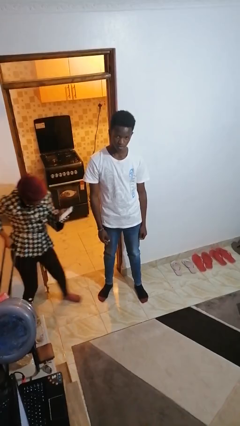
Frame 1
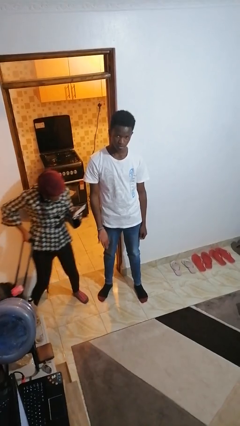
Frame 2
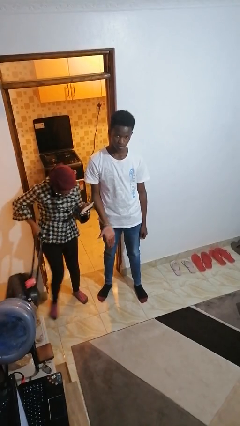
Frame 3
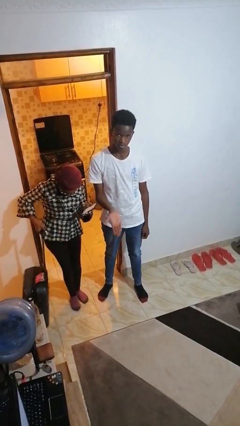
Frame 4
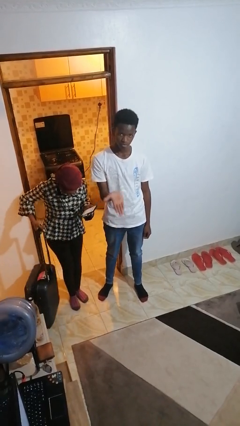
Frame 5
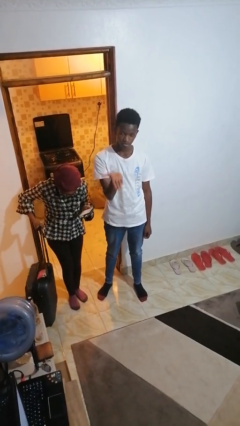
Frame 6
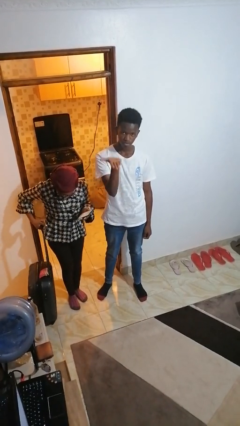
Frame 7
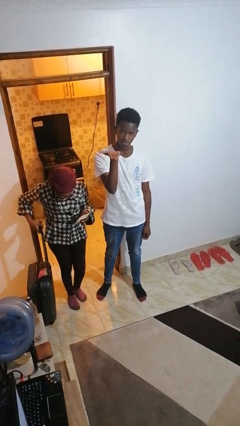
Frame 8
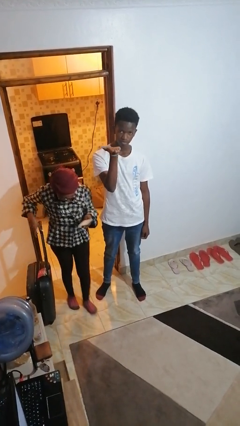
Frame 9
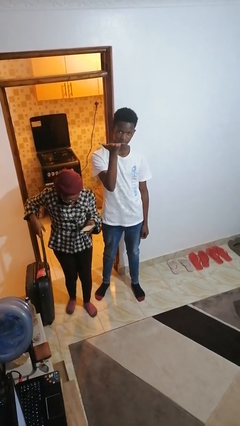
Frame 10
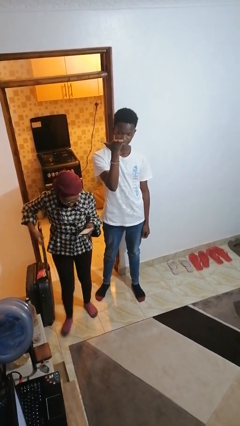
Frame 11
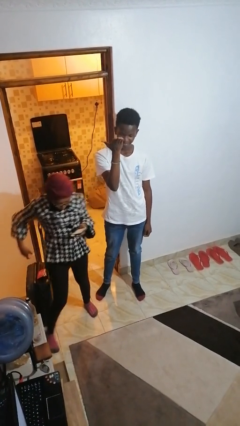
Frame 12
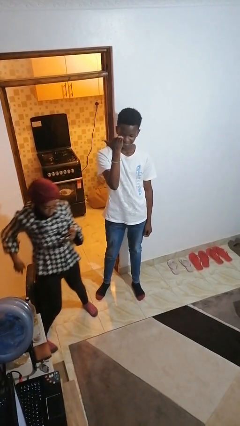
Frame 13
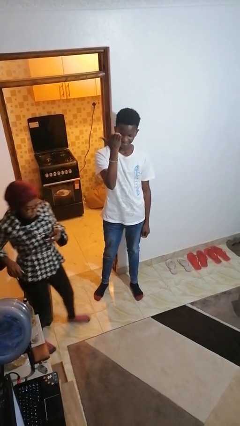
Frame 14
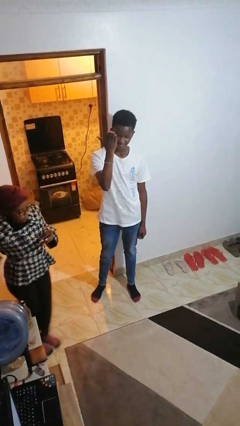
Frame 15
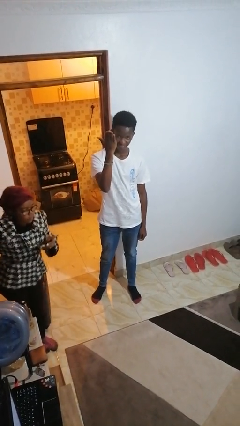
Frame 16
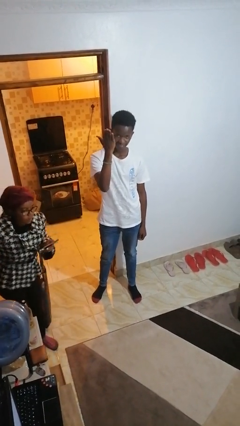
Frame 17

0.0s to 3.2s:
person gestures swipe up

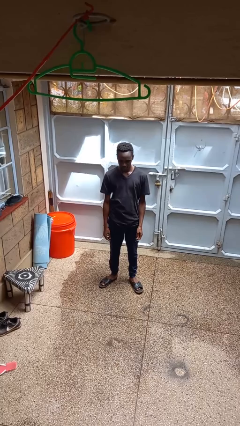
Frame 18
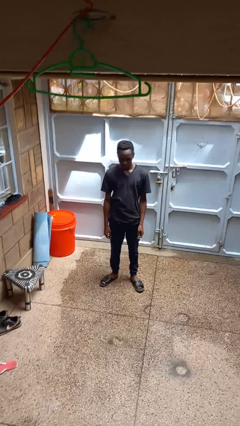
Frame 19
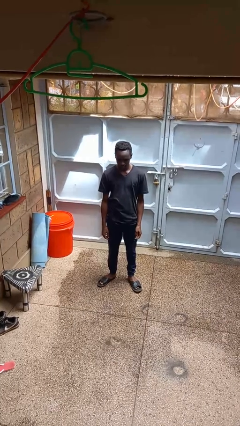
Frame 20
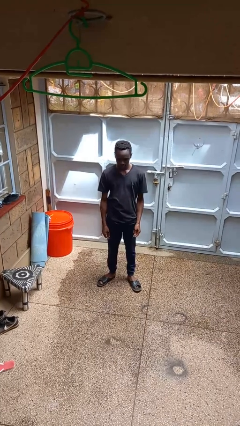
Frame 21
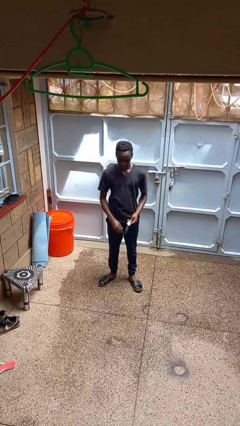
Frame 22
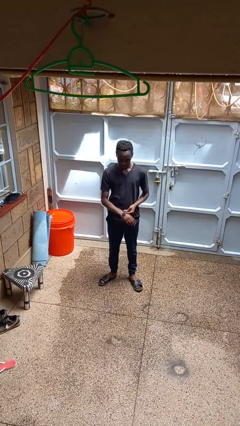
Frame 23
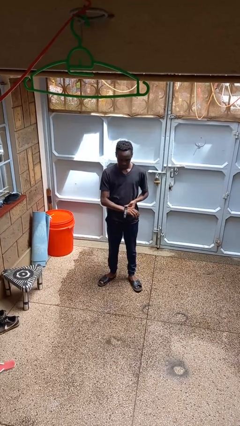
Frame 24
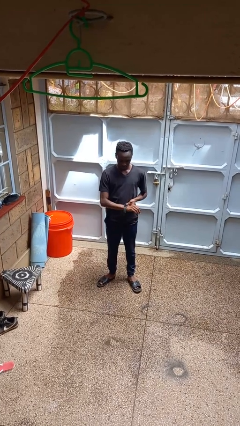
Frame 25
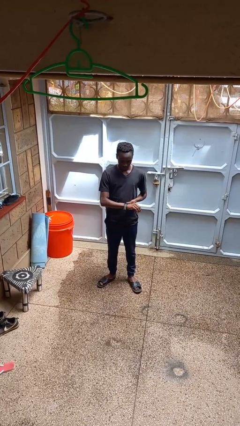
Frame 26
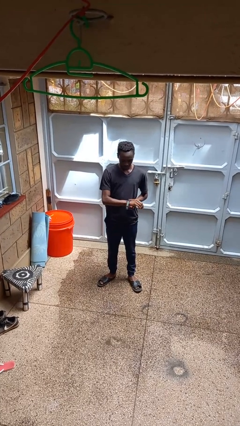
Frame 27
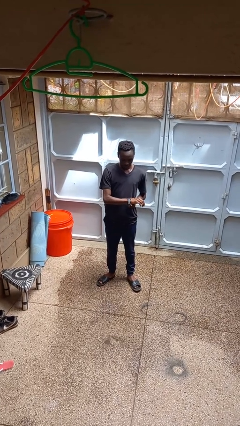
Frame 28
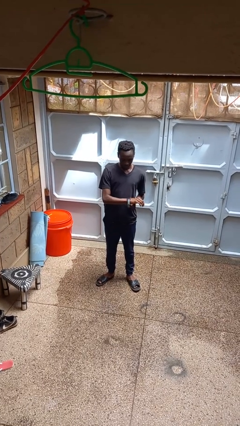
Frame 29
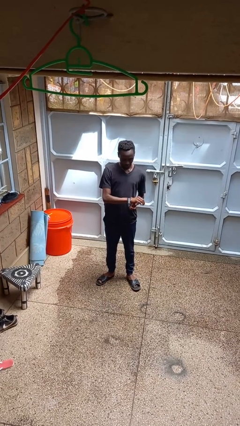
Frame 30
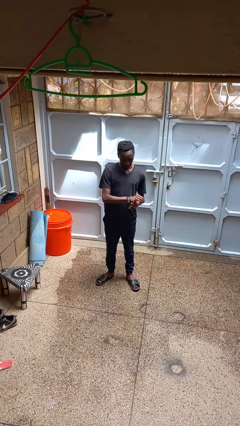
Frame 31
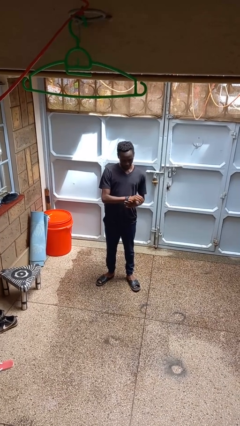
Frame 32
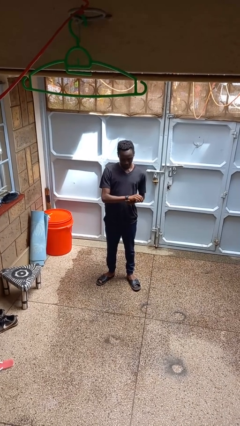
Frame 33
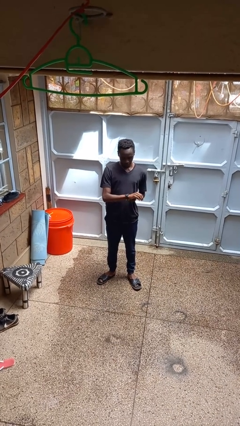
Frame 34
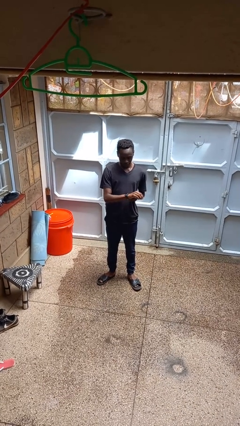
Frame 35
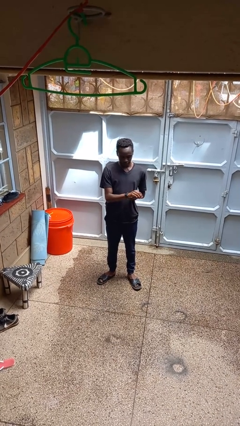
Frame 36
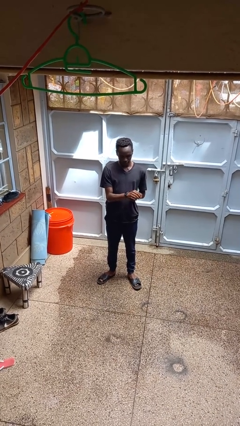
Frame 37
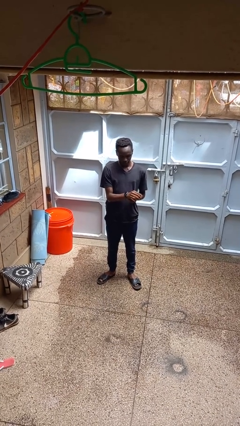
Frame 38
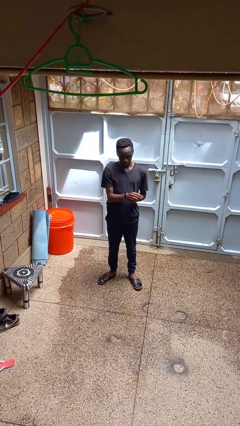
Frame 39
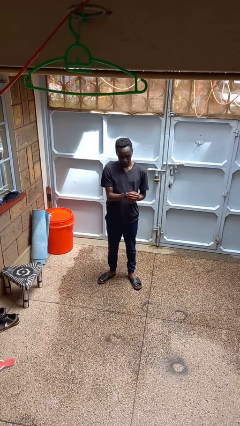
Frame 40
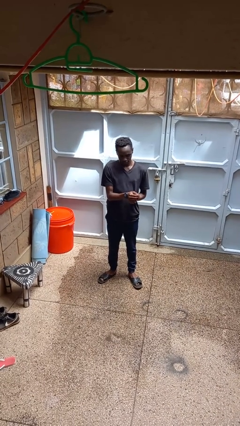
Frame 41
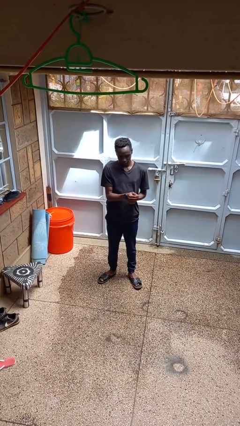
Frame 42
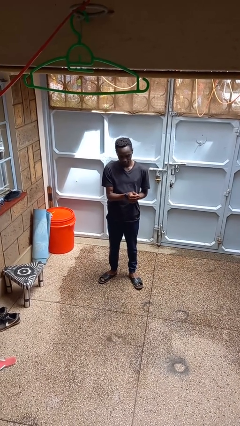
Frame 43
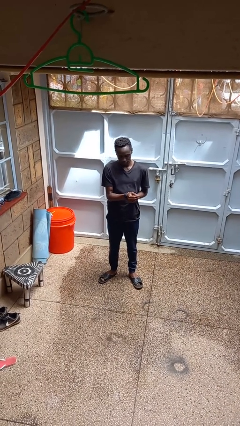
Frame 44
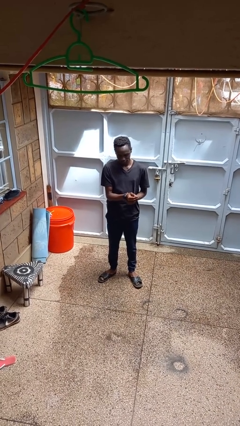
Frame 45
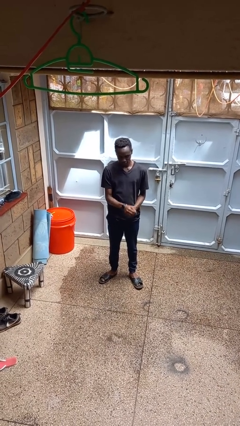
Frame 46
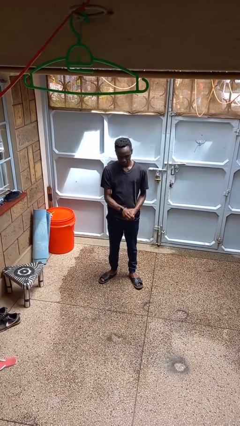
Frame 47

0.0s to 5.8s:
person puts on wristwatch

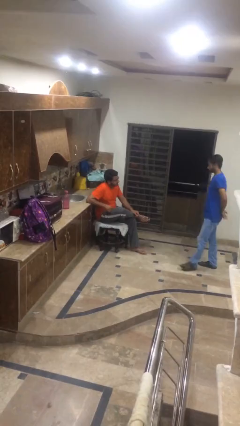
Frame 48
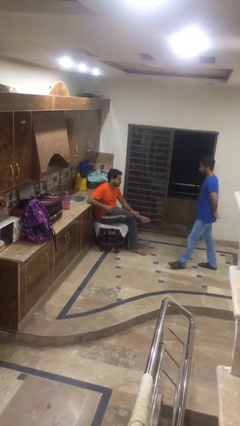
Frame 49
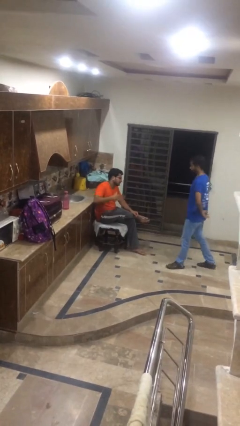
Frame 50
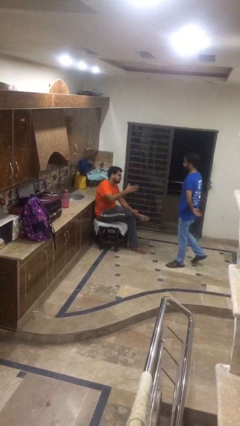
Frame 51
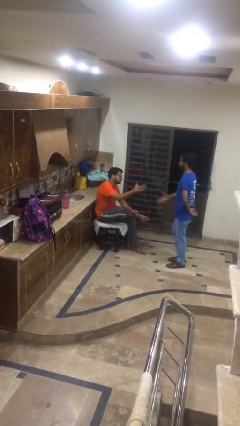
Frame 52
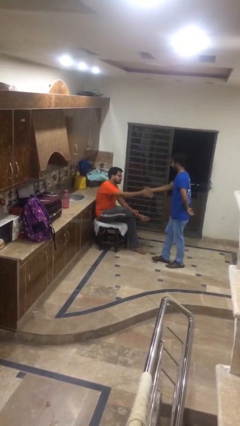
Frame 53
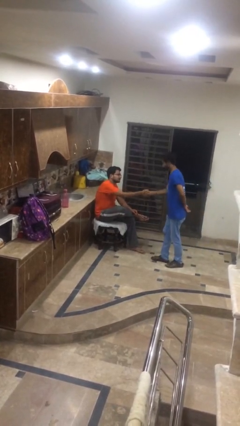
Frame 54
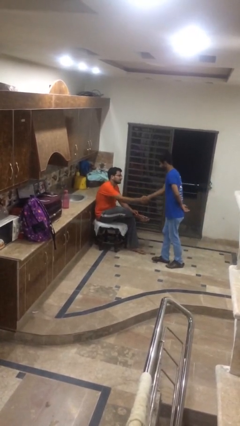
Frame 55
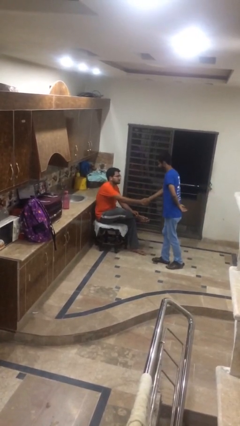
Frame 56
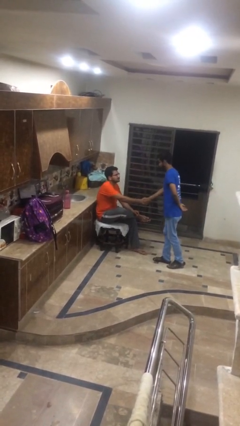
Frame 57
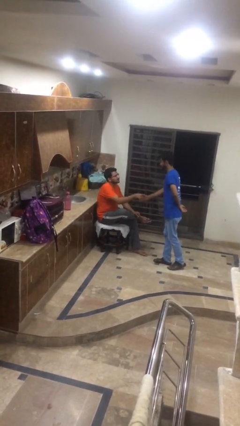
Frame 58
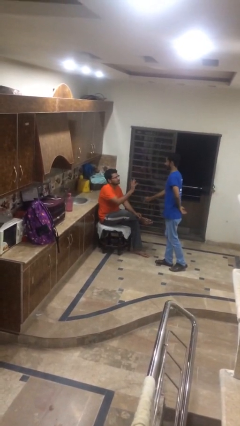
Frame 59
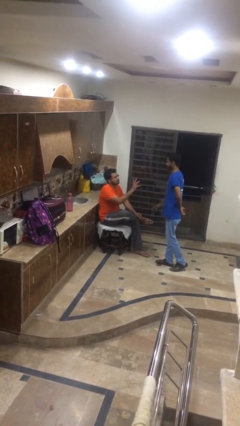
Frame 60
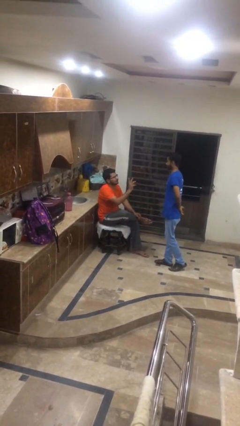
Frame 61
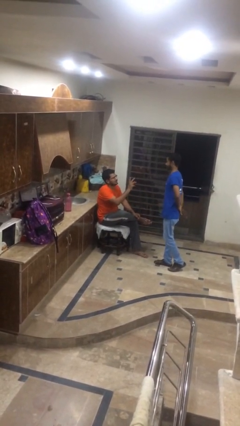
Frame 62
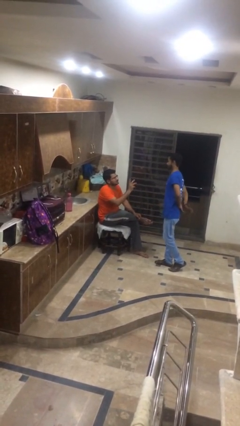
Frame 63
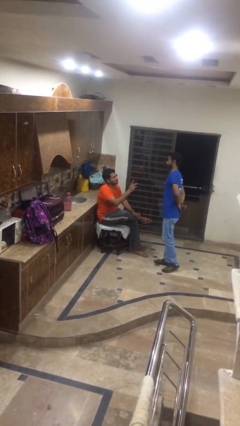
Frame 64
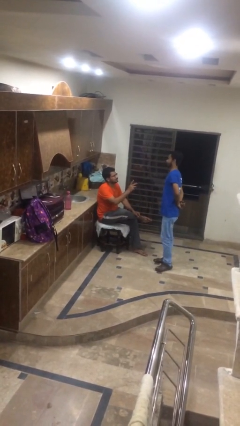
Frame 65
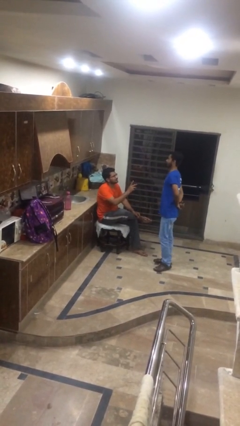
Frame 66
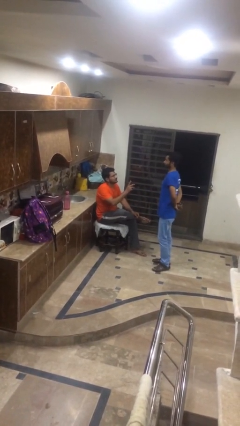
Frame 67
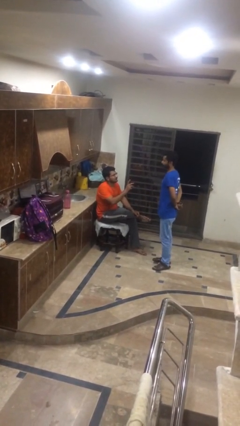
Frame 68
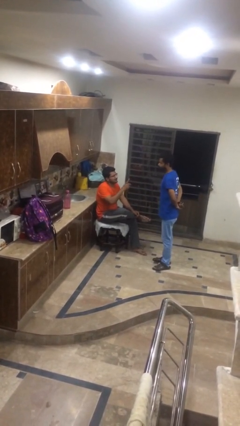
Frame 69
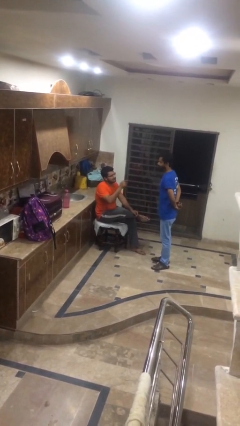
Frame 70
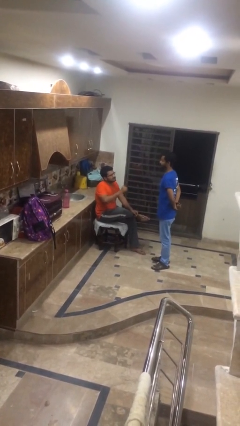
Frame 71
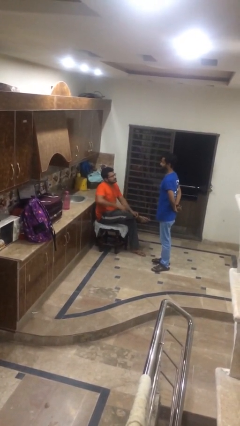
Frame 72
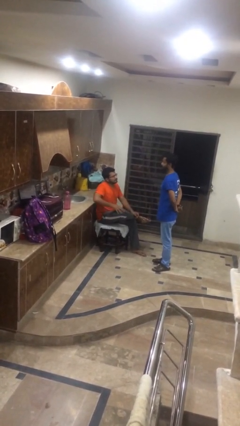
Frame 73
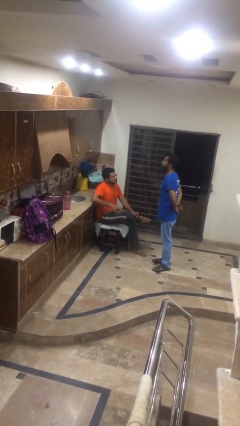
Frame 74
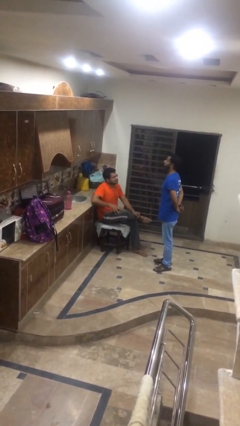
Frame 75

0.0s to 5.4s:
person shakes hand

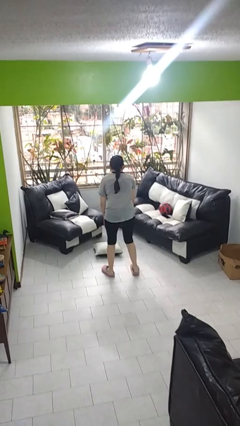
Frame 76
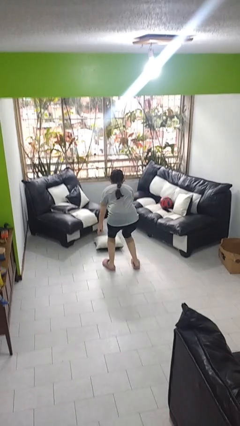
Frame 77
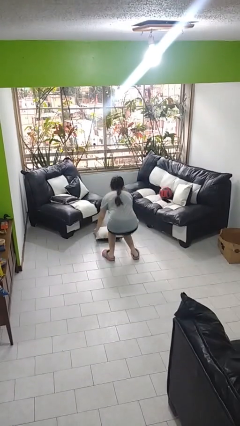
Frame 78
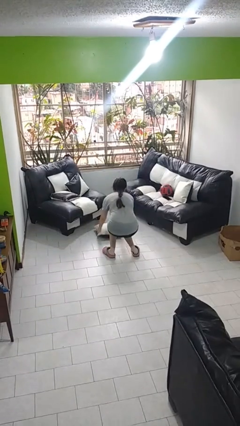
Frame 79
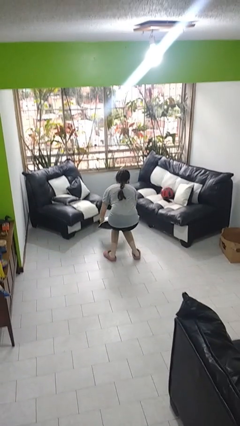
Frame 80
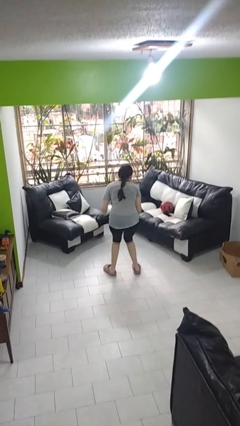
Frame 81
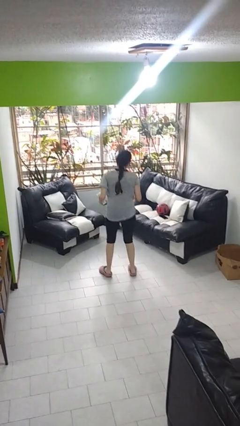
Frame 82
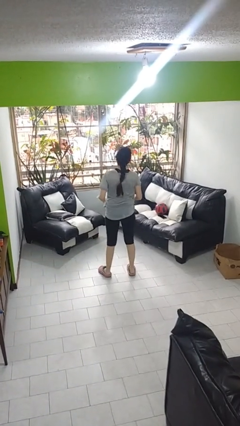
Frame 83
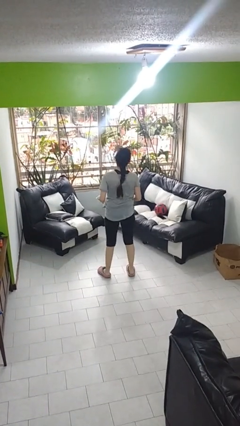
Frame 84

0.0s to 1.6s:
person picks up object from floor

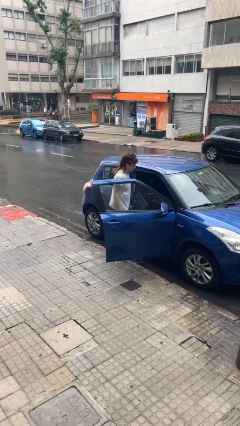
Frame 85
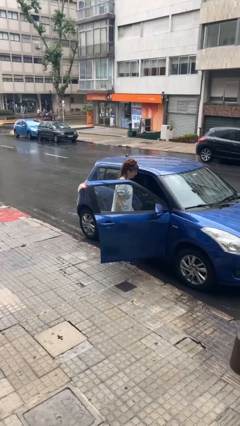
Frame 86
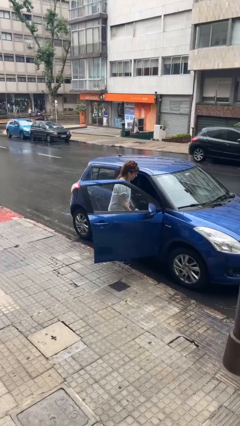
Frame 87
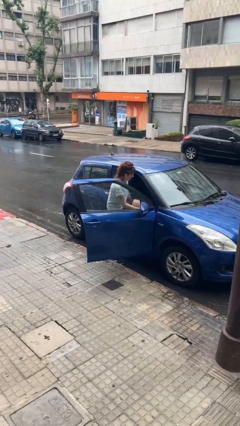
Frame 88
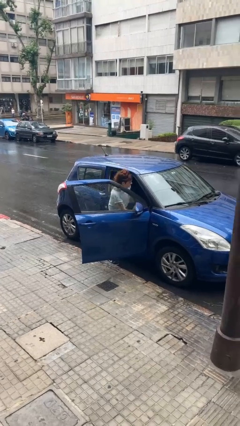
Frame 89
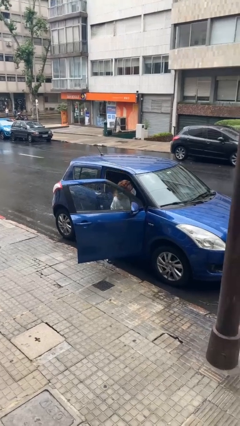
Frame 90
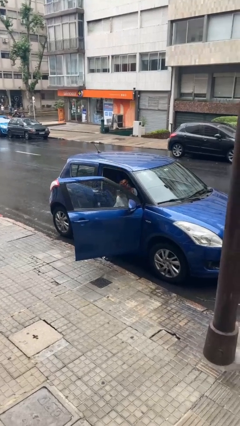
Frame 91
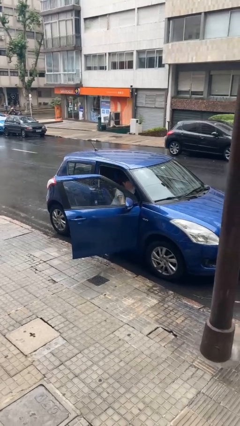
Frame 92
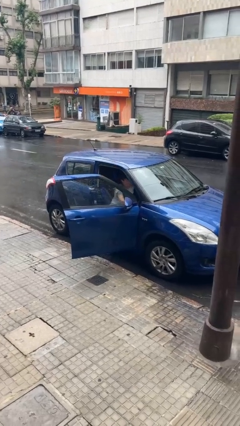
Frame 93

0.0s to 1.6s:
person enters car
